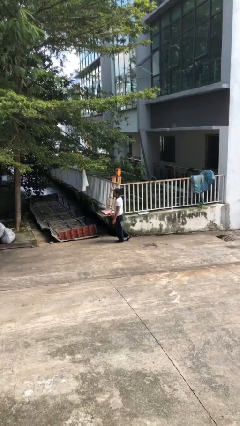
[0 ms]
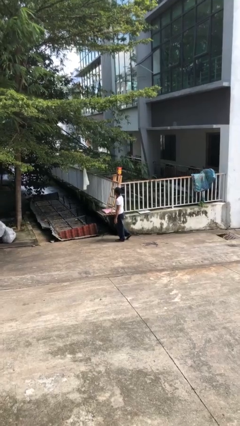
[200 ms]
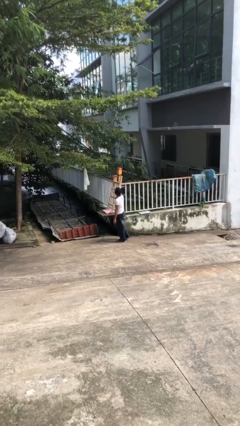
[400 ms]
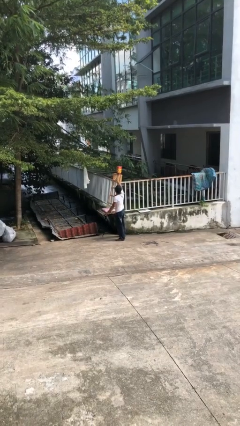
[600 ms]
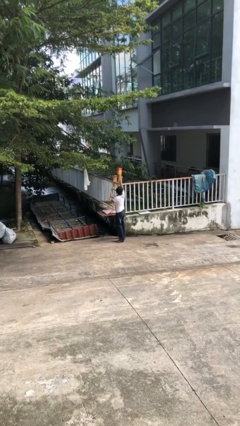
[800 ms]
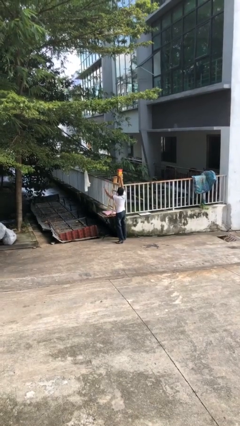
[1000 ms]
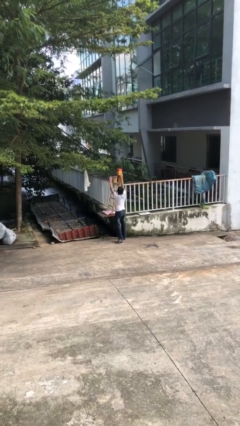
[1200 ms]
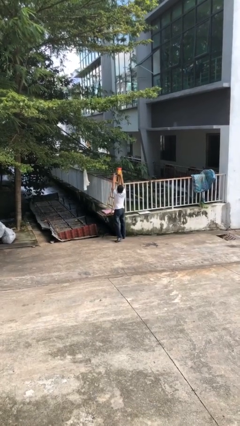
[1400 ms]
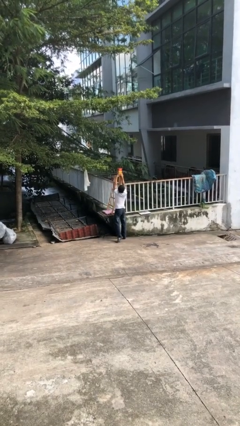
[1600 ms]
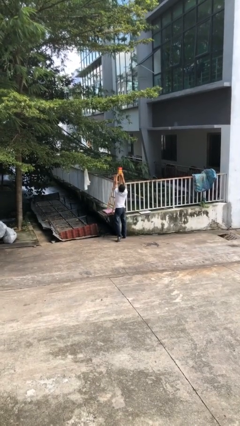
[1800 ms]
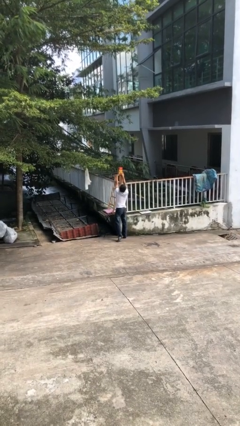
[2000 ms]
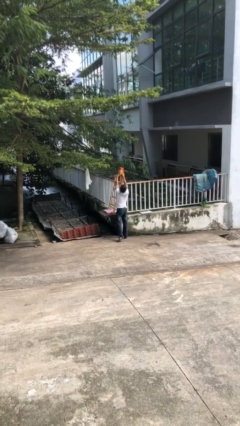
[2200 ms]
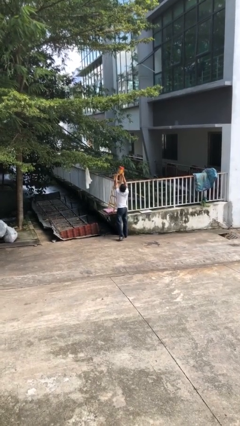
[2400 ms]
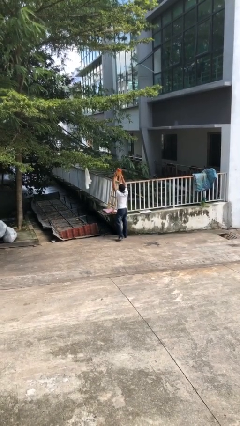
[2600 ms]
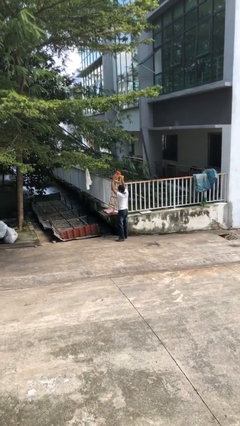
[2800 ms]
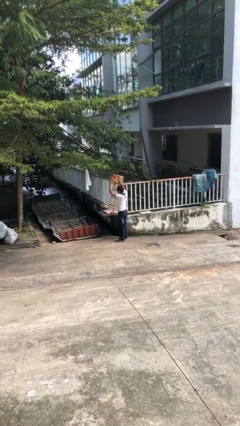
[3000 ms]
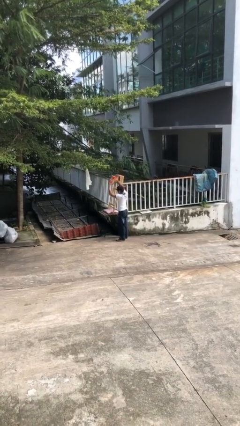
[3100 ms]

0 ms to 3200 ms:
person picks up object from shelf

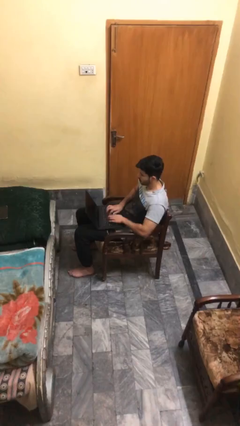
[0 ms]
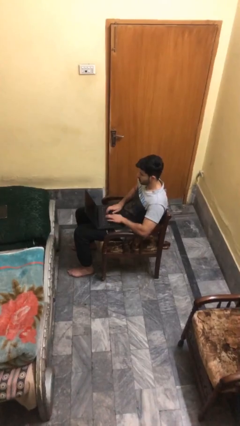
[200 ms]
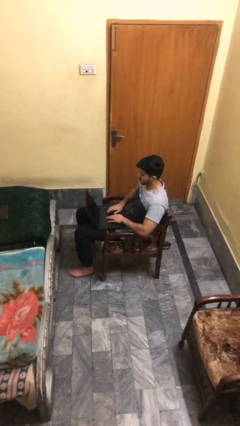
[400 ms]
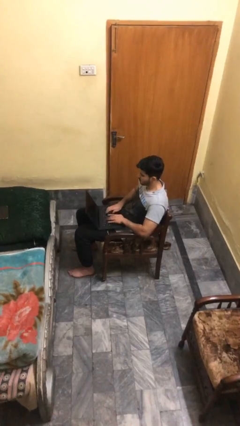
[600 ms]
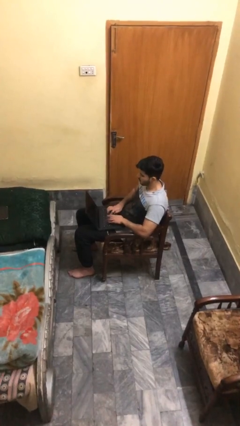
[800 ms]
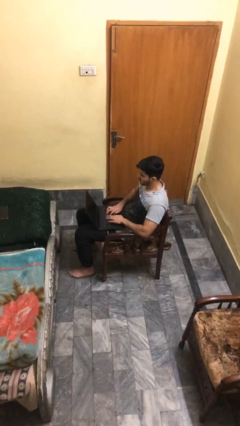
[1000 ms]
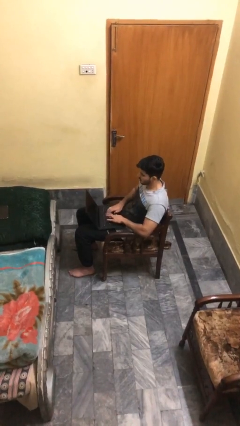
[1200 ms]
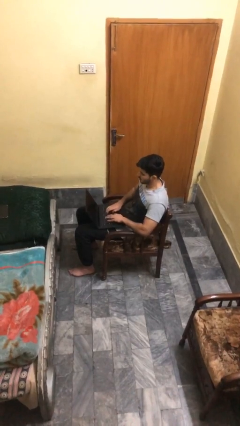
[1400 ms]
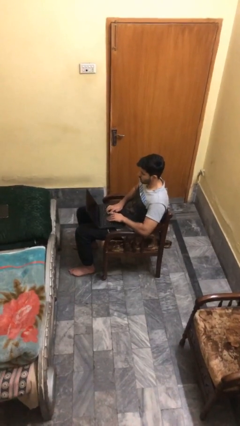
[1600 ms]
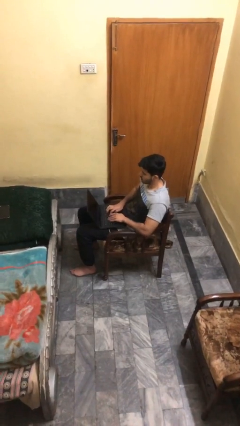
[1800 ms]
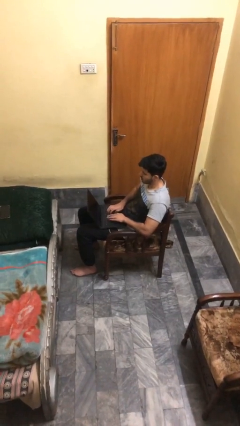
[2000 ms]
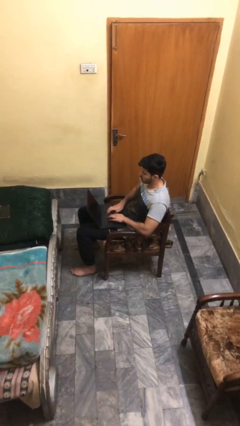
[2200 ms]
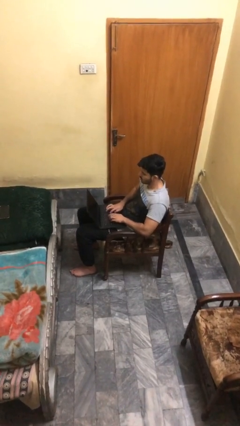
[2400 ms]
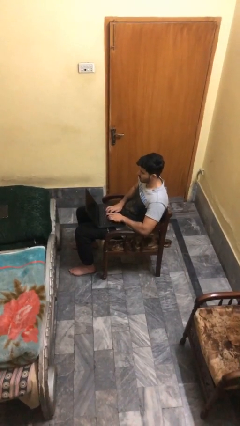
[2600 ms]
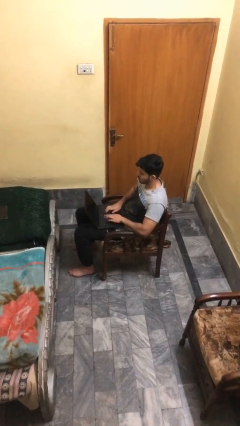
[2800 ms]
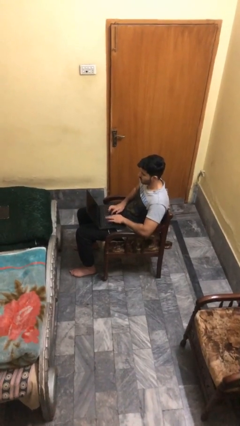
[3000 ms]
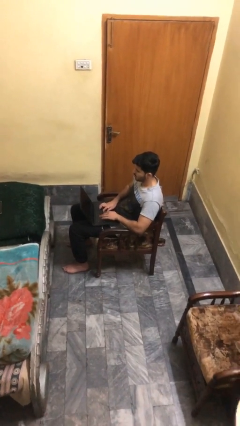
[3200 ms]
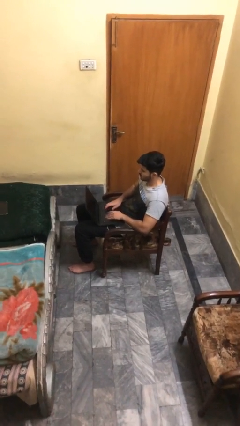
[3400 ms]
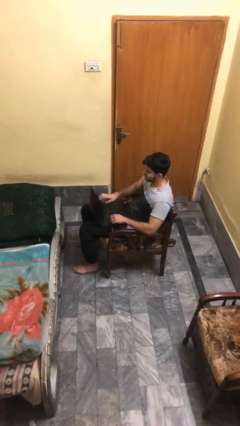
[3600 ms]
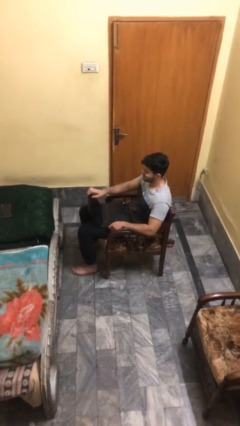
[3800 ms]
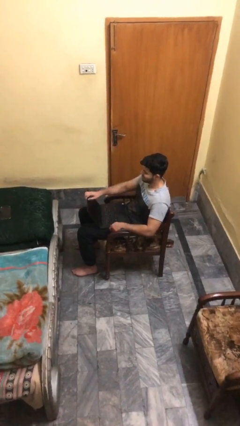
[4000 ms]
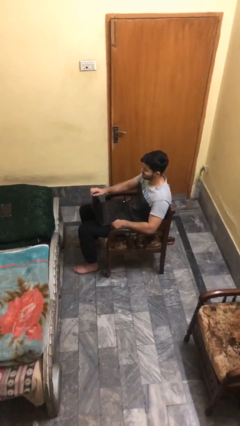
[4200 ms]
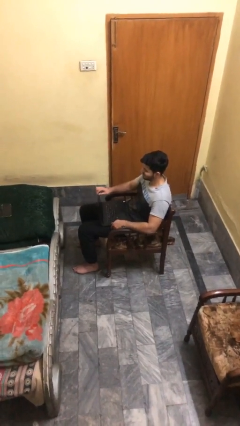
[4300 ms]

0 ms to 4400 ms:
person interacts with laptop

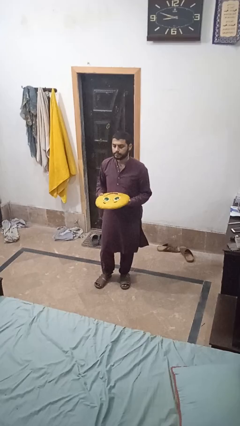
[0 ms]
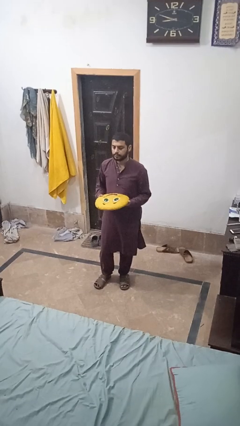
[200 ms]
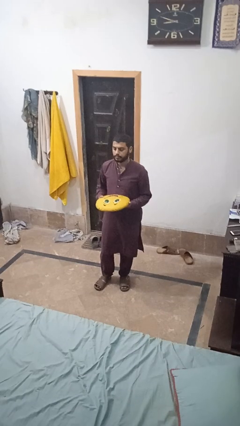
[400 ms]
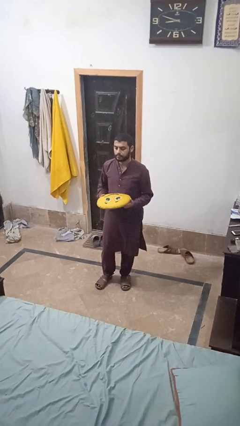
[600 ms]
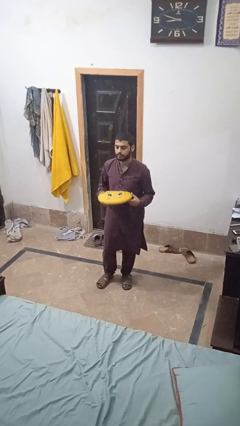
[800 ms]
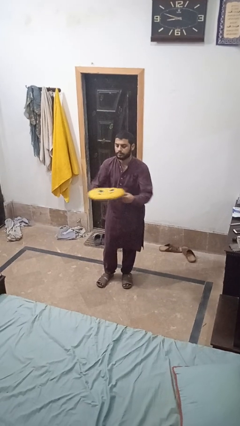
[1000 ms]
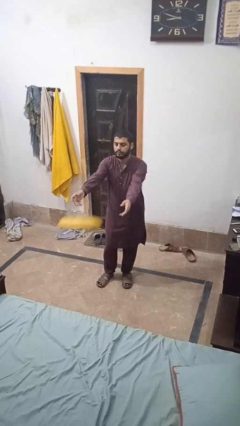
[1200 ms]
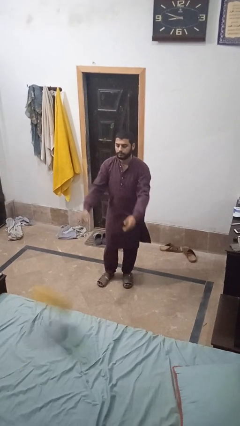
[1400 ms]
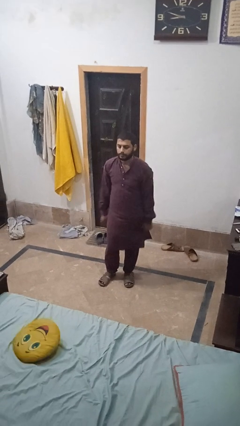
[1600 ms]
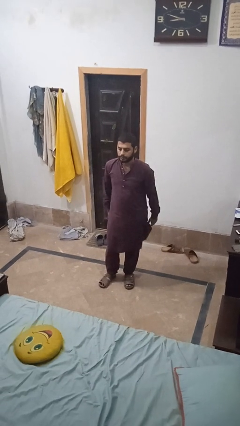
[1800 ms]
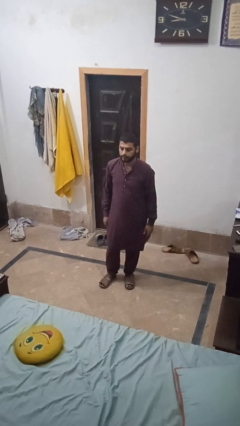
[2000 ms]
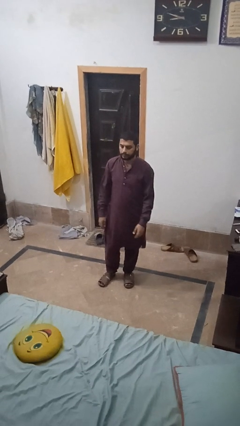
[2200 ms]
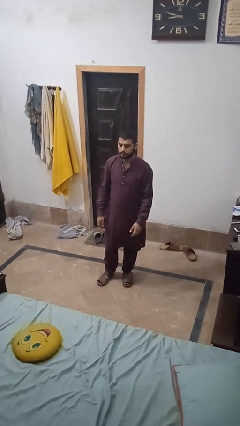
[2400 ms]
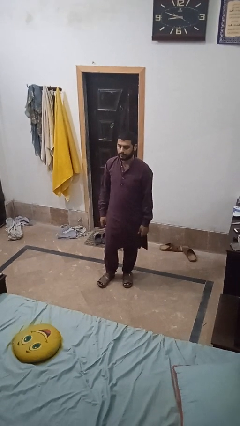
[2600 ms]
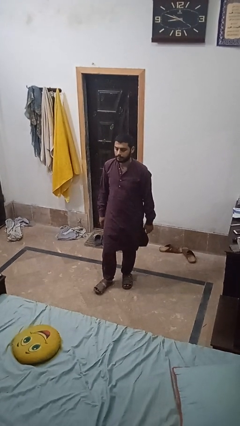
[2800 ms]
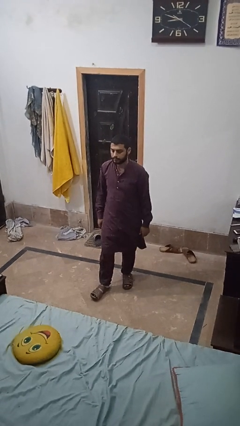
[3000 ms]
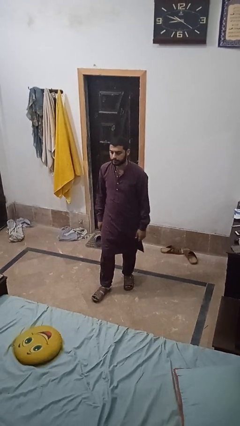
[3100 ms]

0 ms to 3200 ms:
person throws object on bed

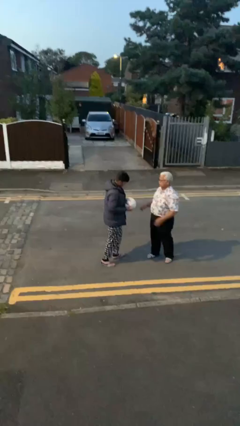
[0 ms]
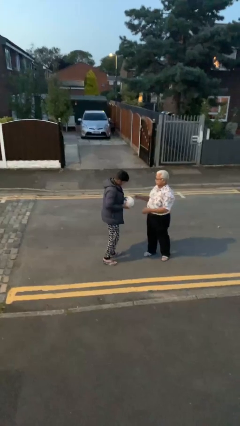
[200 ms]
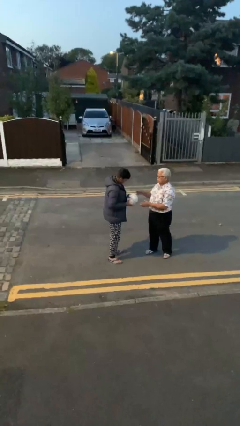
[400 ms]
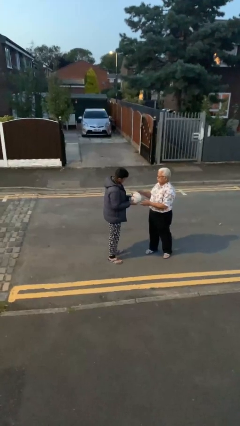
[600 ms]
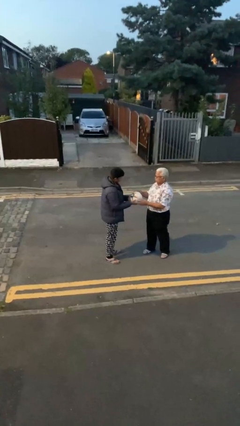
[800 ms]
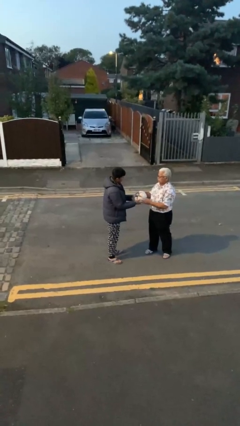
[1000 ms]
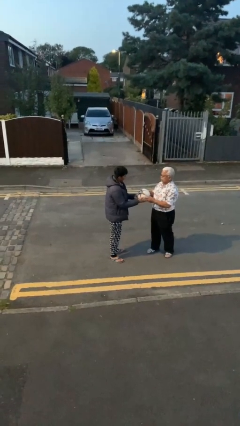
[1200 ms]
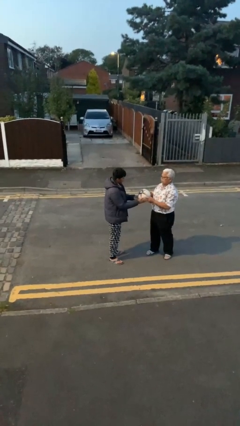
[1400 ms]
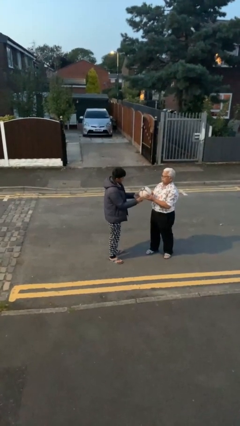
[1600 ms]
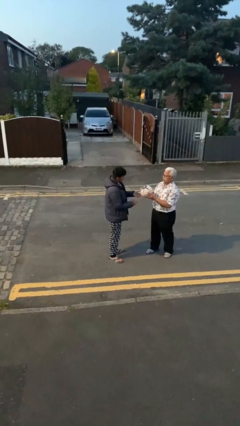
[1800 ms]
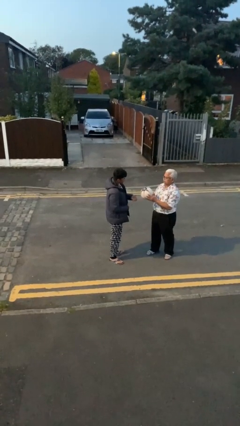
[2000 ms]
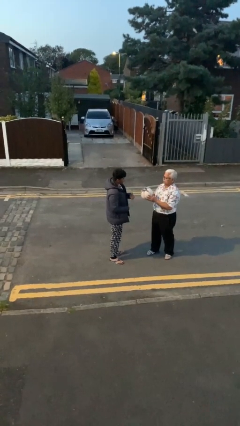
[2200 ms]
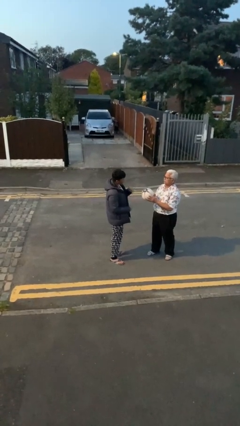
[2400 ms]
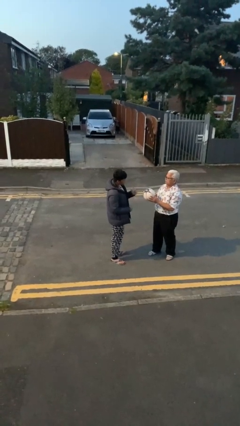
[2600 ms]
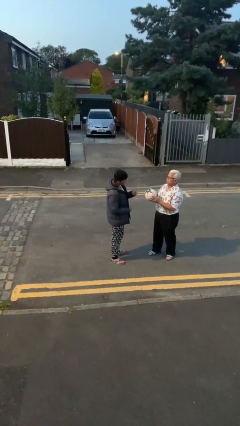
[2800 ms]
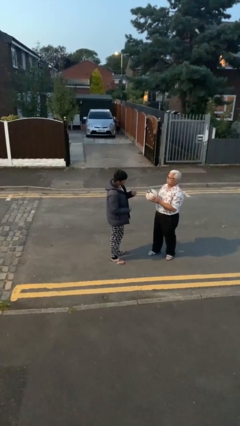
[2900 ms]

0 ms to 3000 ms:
person transfers object to person

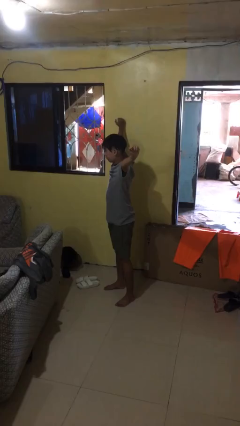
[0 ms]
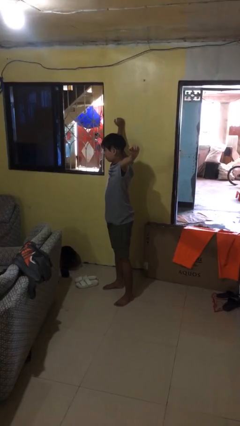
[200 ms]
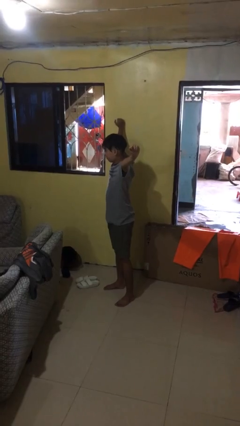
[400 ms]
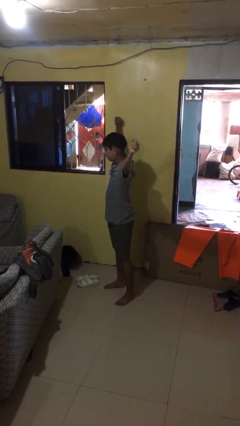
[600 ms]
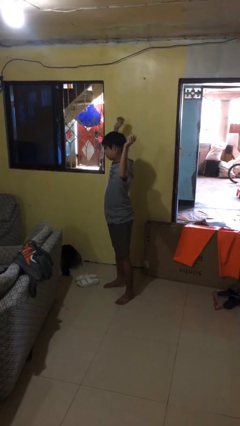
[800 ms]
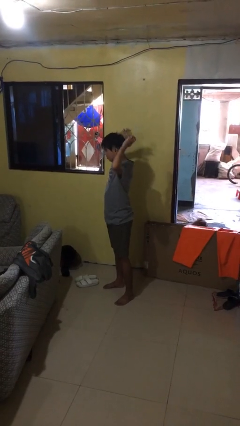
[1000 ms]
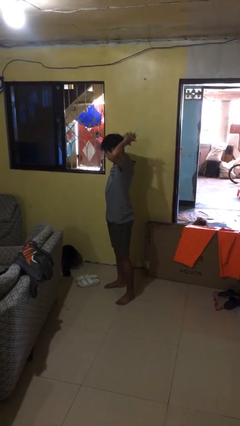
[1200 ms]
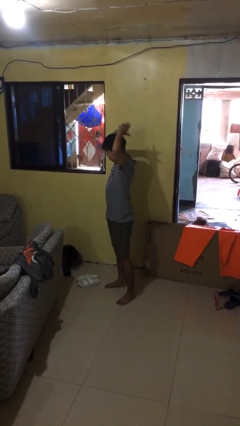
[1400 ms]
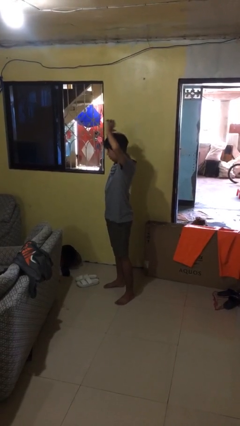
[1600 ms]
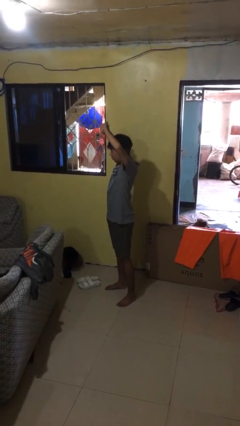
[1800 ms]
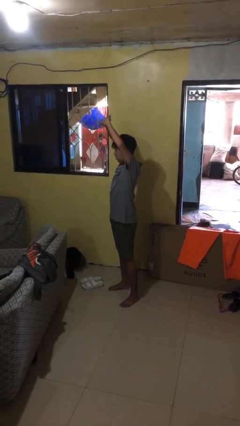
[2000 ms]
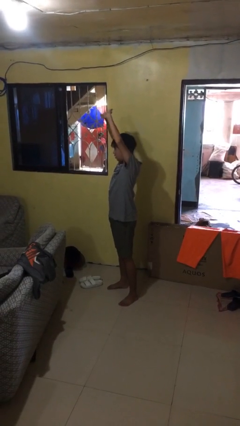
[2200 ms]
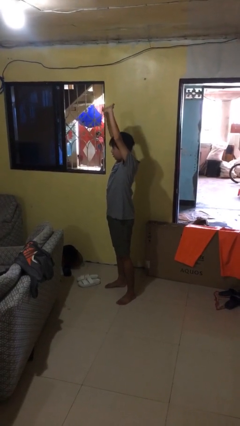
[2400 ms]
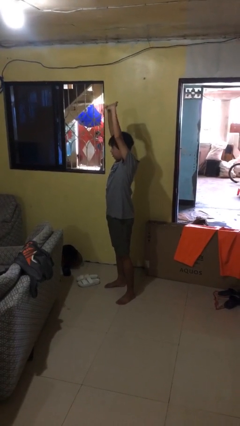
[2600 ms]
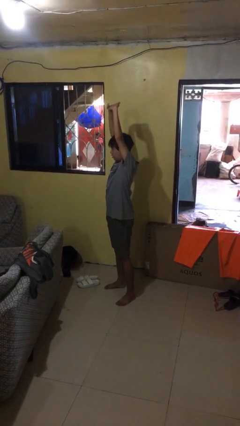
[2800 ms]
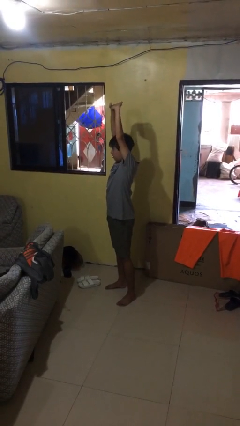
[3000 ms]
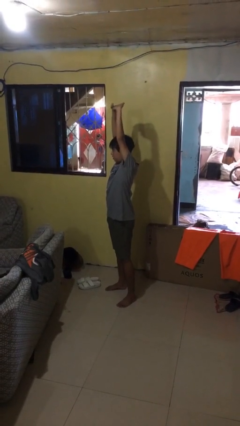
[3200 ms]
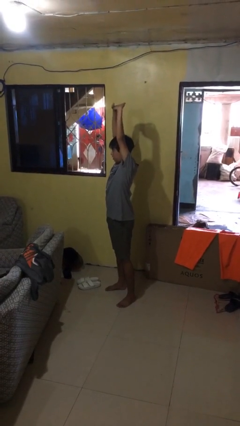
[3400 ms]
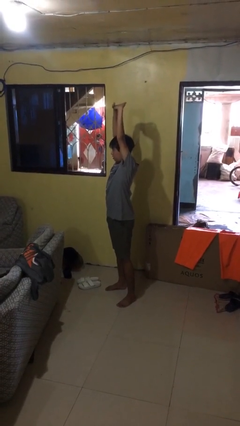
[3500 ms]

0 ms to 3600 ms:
person stretches arms over head
